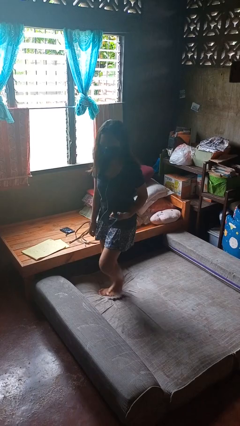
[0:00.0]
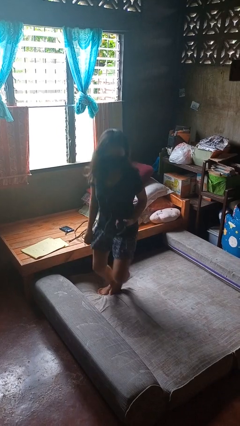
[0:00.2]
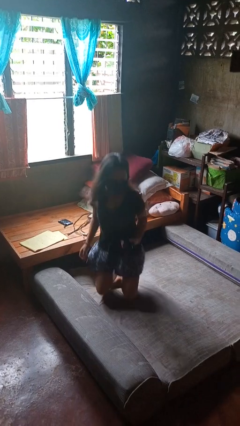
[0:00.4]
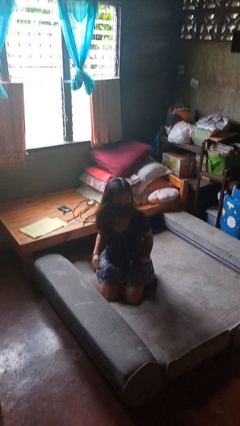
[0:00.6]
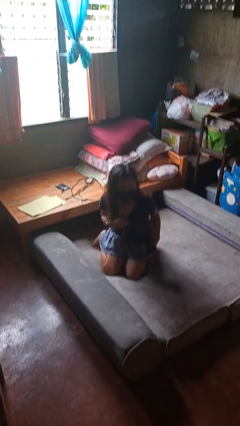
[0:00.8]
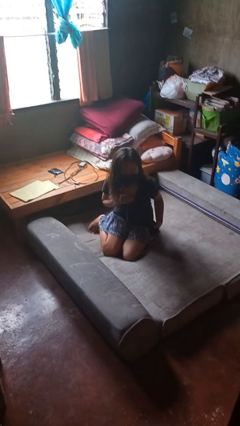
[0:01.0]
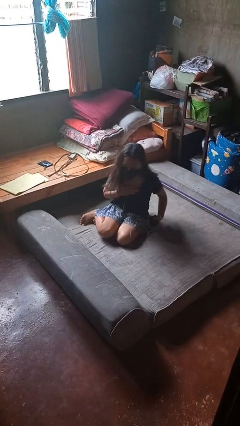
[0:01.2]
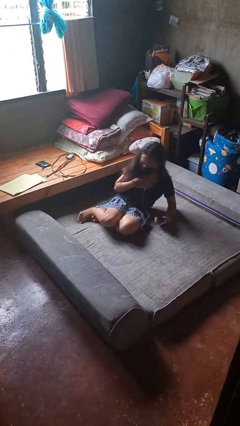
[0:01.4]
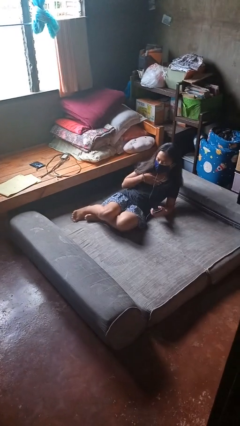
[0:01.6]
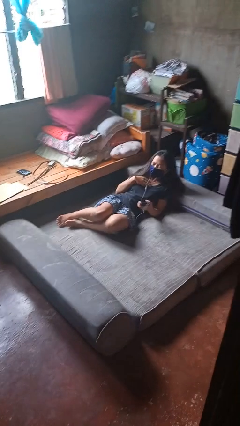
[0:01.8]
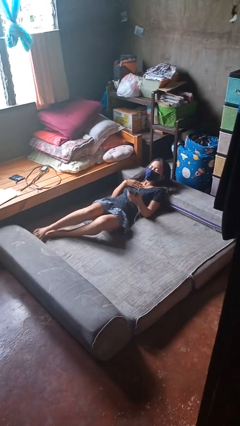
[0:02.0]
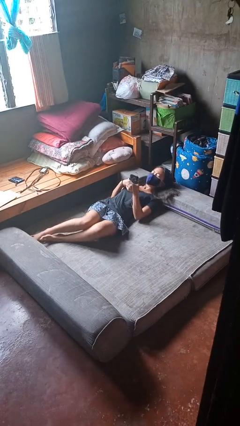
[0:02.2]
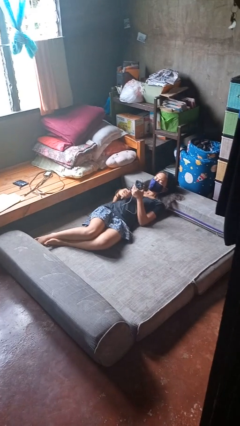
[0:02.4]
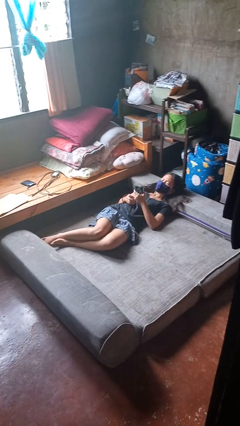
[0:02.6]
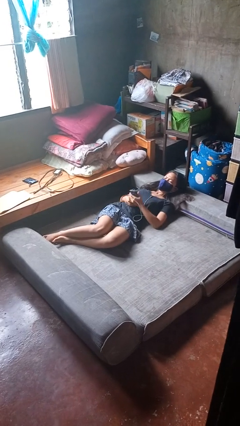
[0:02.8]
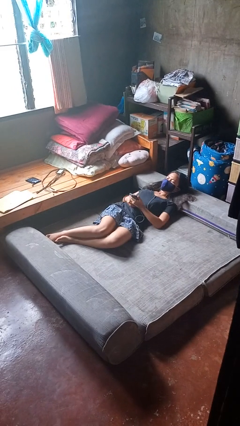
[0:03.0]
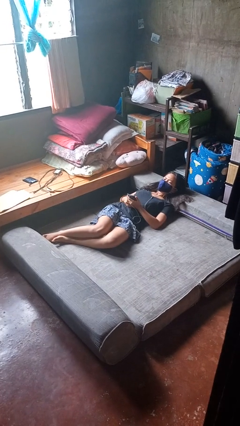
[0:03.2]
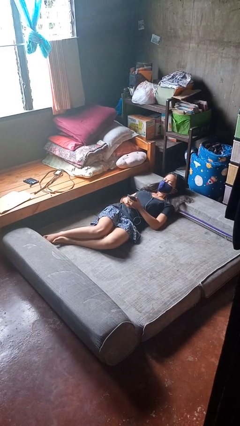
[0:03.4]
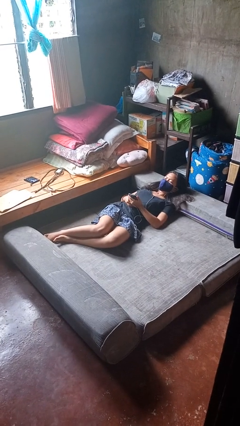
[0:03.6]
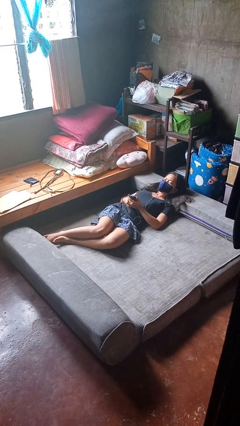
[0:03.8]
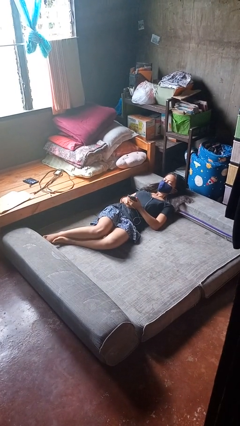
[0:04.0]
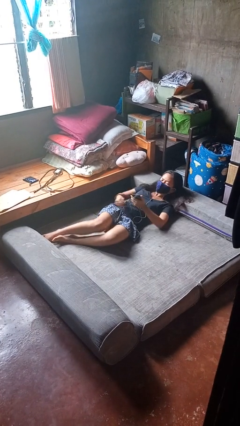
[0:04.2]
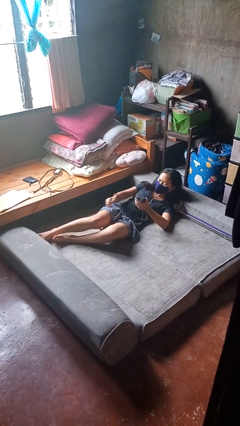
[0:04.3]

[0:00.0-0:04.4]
person lies down on bed

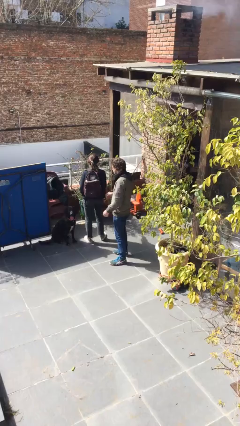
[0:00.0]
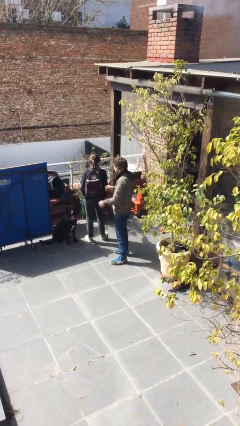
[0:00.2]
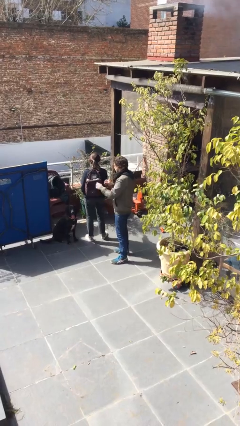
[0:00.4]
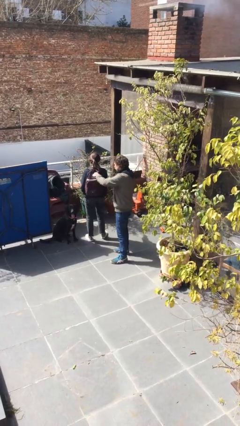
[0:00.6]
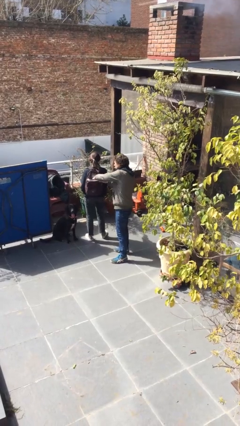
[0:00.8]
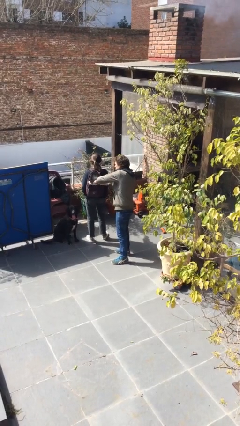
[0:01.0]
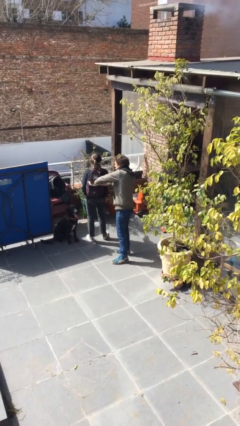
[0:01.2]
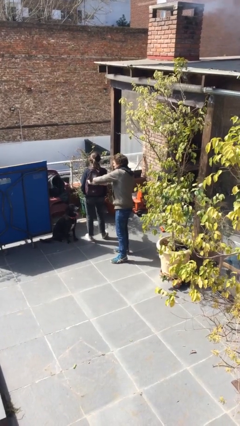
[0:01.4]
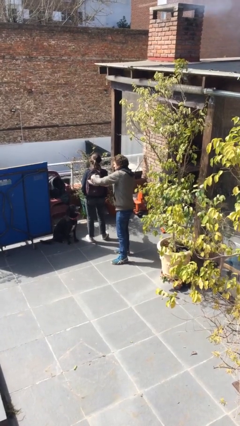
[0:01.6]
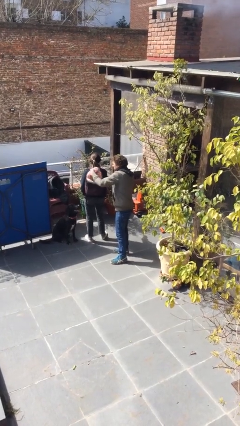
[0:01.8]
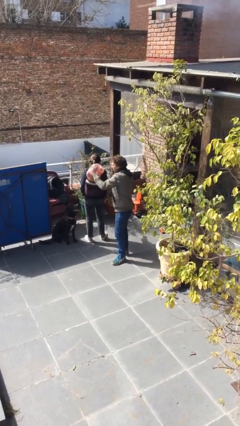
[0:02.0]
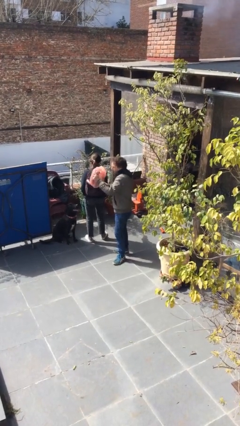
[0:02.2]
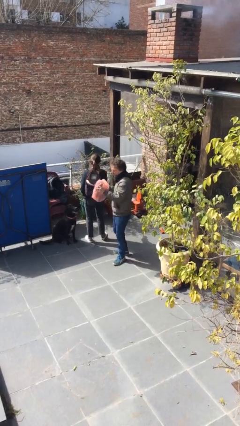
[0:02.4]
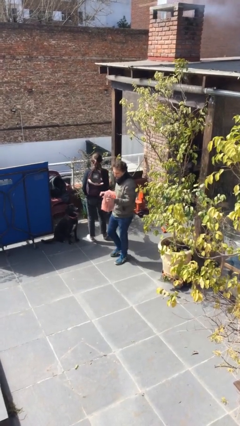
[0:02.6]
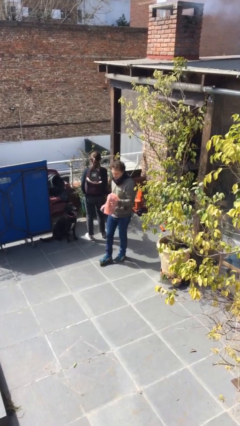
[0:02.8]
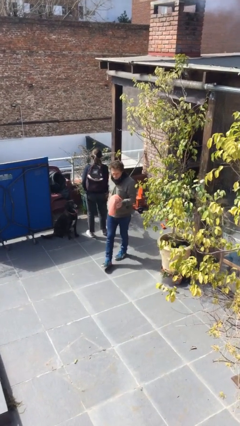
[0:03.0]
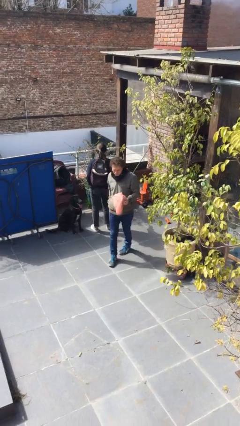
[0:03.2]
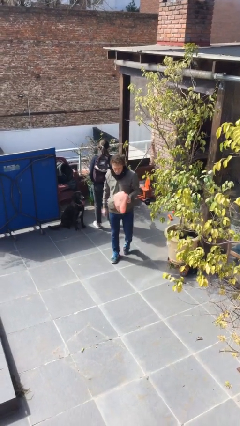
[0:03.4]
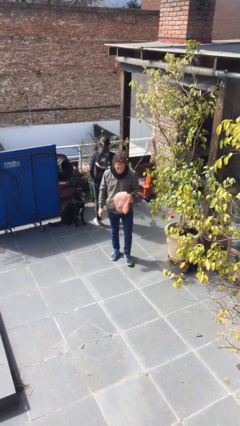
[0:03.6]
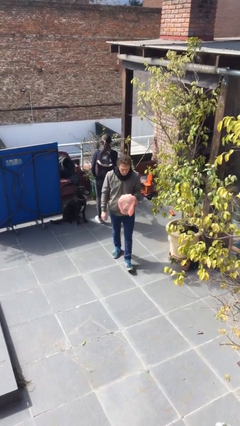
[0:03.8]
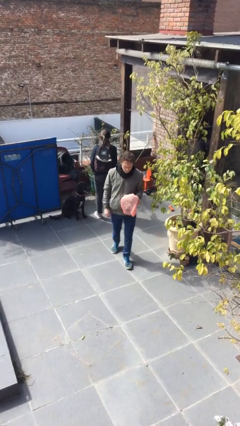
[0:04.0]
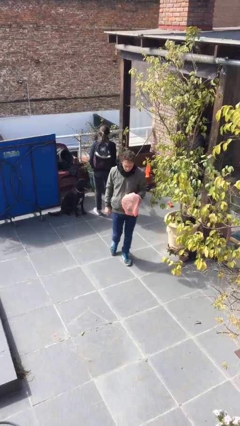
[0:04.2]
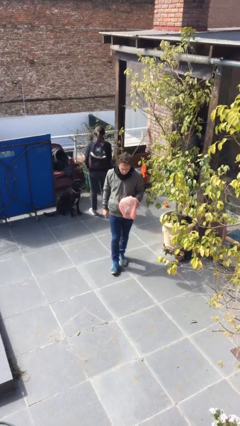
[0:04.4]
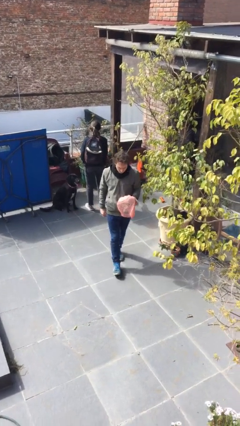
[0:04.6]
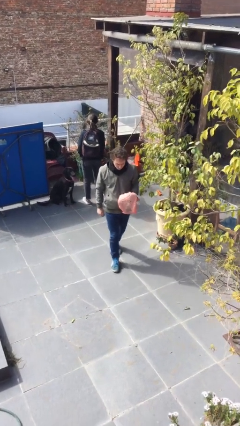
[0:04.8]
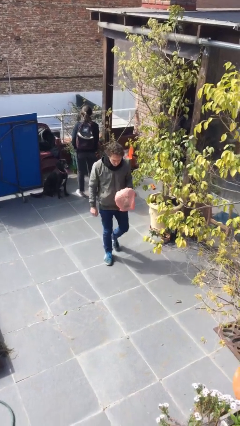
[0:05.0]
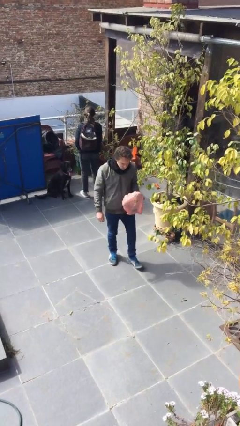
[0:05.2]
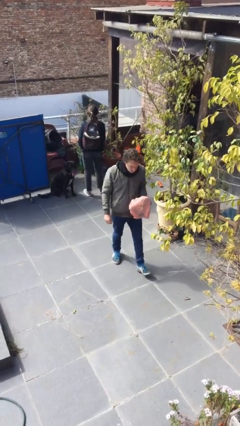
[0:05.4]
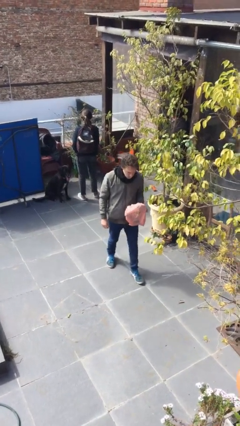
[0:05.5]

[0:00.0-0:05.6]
person steals object from person

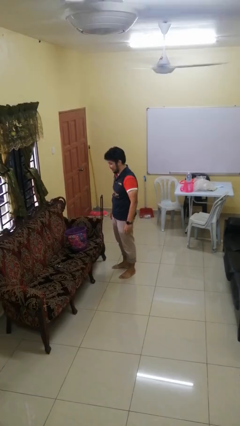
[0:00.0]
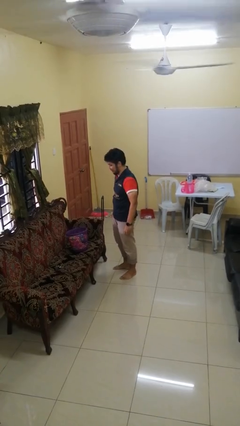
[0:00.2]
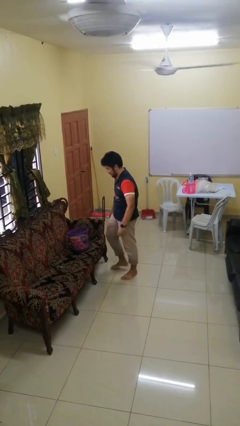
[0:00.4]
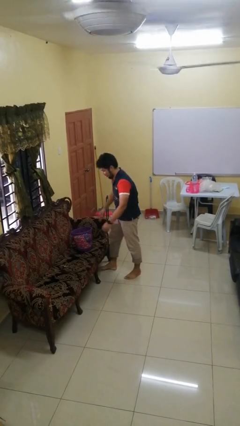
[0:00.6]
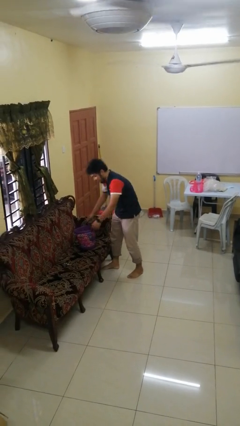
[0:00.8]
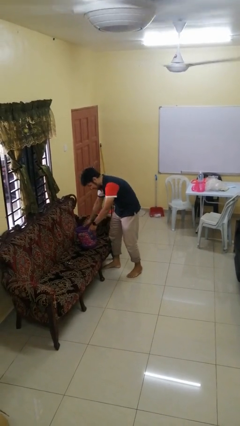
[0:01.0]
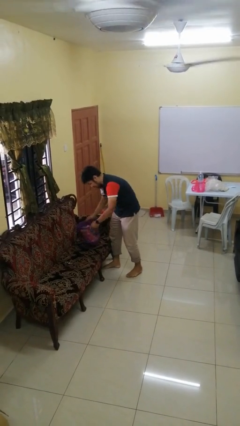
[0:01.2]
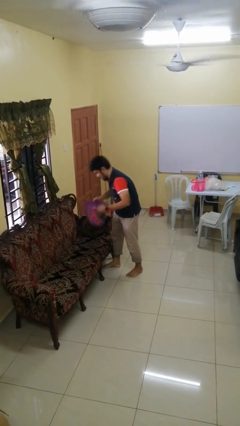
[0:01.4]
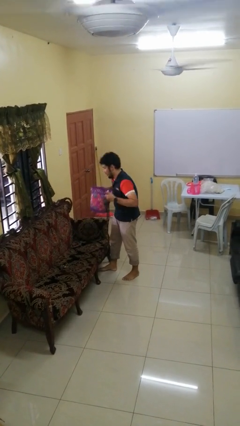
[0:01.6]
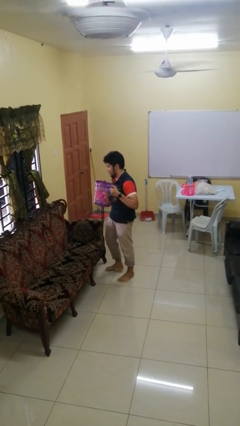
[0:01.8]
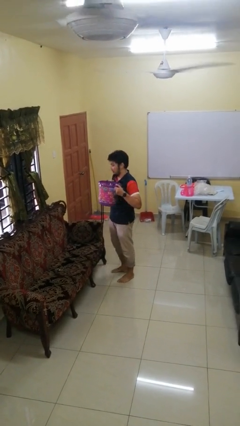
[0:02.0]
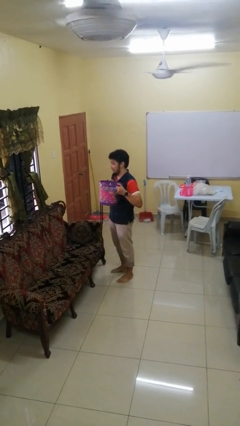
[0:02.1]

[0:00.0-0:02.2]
person picks up object from couch

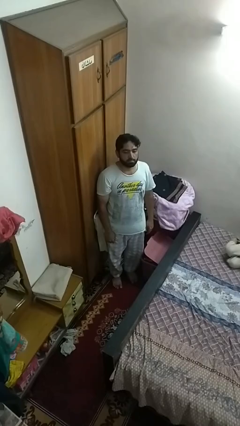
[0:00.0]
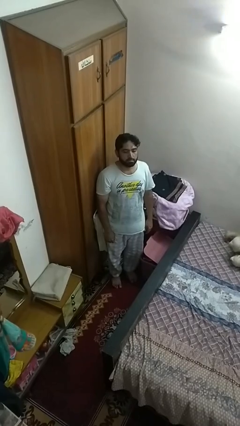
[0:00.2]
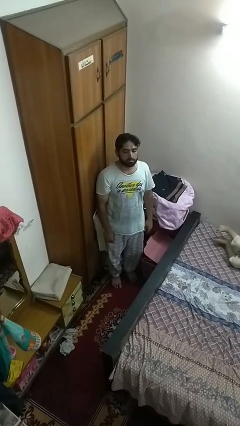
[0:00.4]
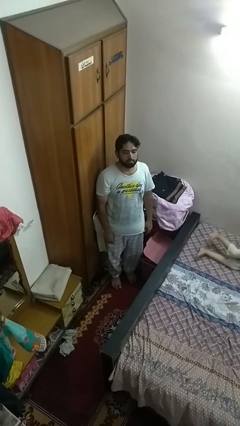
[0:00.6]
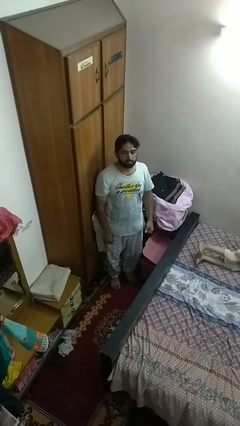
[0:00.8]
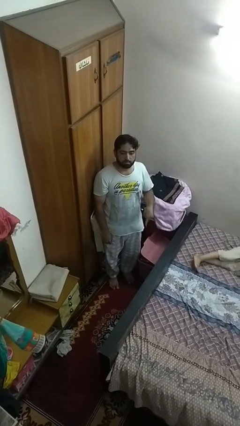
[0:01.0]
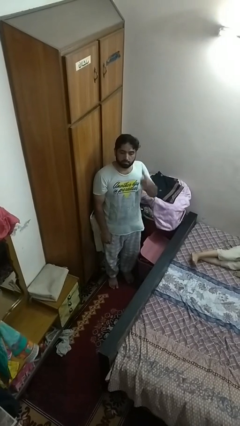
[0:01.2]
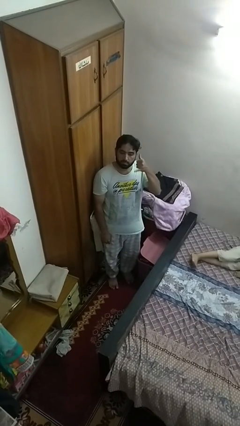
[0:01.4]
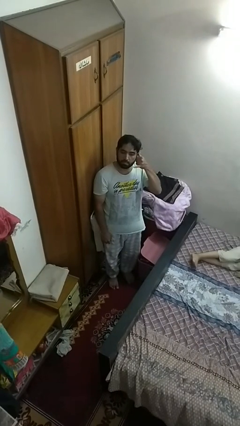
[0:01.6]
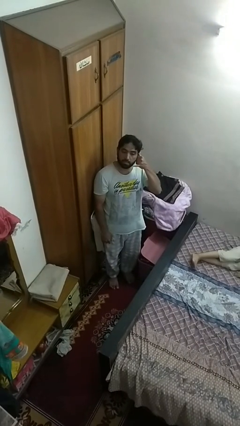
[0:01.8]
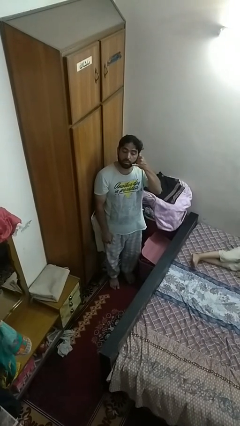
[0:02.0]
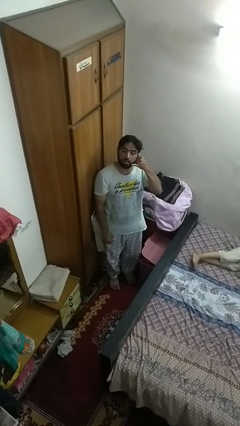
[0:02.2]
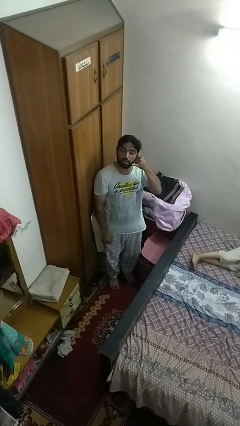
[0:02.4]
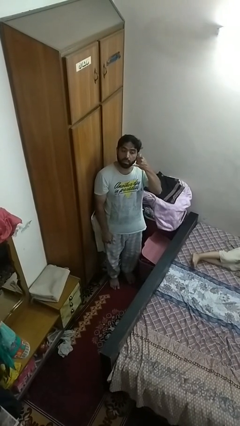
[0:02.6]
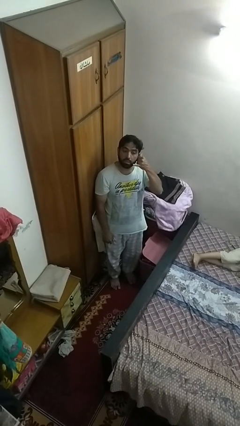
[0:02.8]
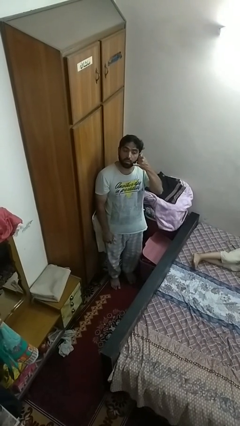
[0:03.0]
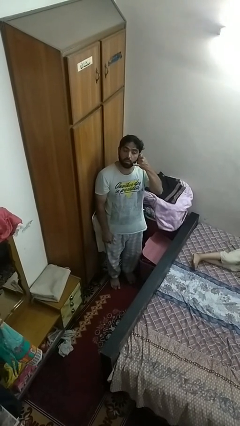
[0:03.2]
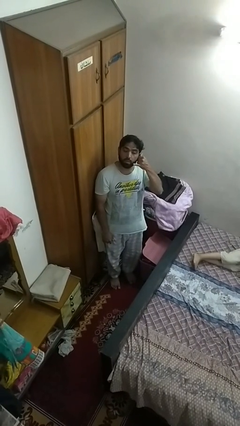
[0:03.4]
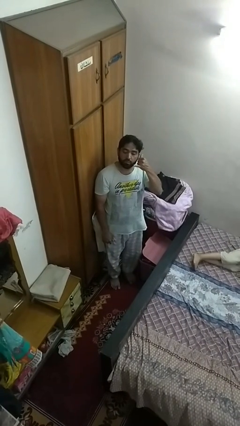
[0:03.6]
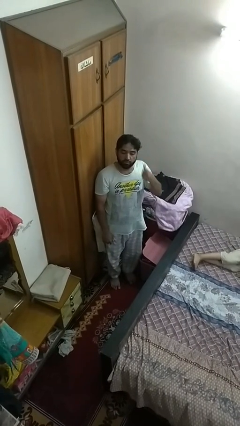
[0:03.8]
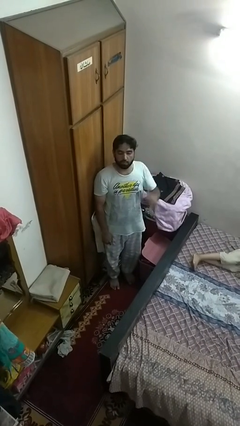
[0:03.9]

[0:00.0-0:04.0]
person gestures call me

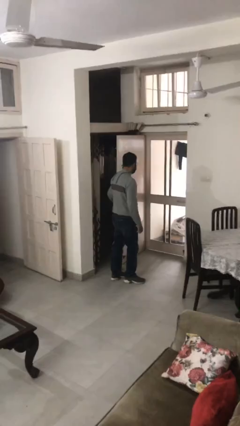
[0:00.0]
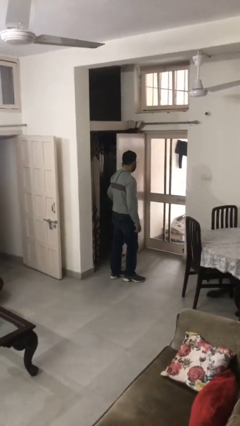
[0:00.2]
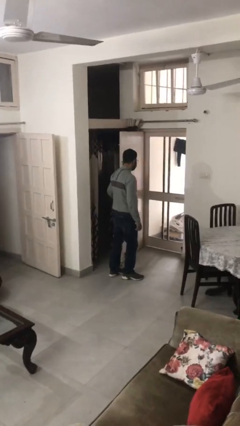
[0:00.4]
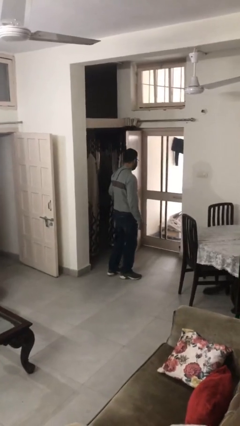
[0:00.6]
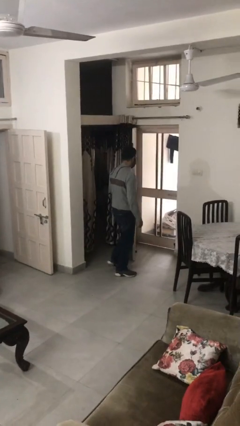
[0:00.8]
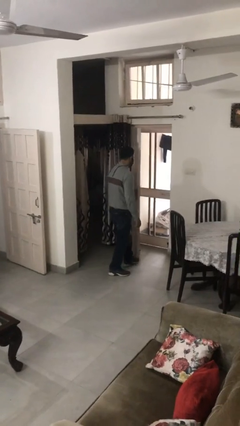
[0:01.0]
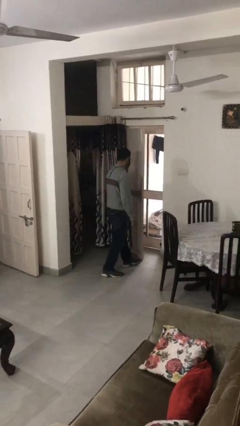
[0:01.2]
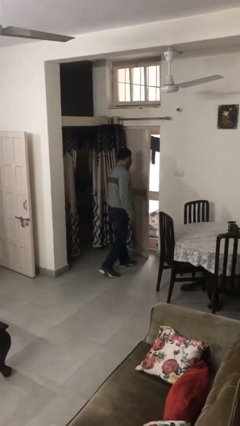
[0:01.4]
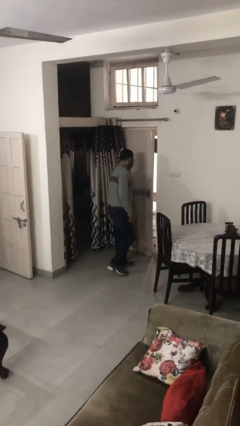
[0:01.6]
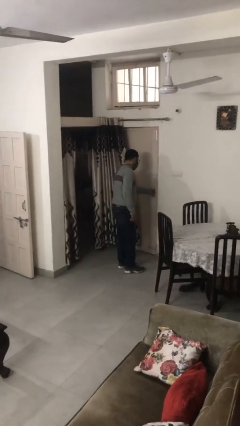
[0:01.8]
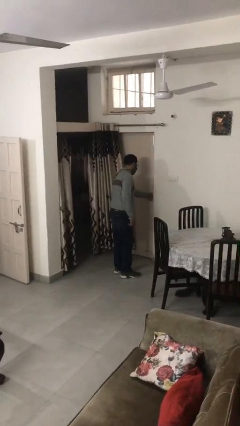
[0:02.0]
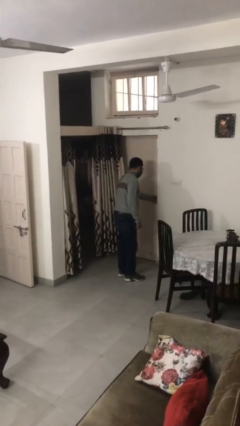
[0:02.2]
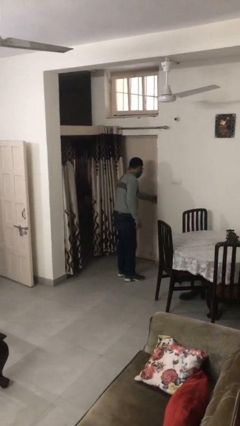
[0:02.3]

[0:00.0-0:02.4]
person closes facility door
